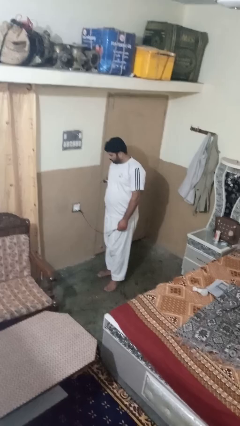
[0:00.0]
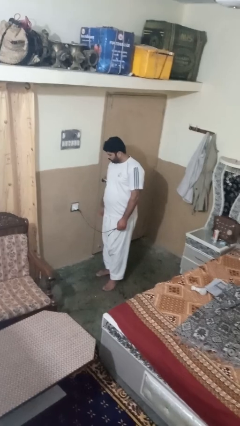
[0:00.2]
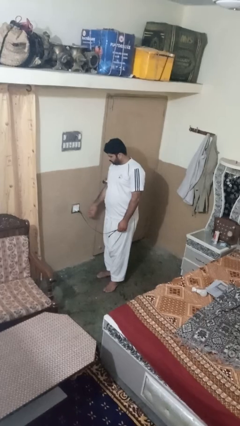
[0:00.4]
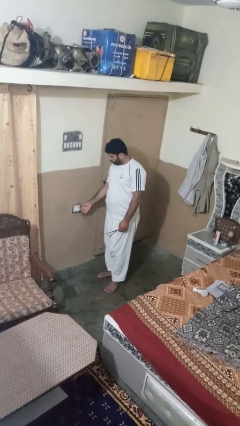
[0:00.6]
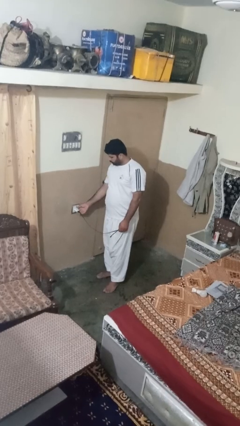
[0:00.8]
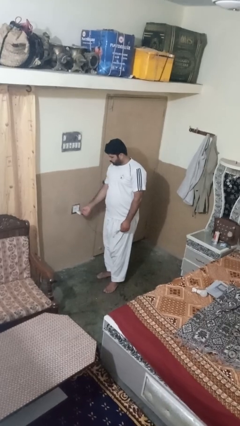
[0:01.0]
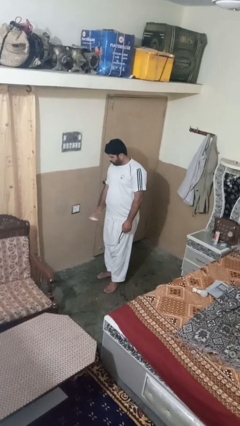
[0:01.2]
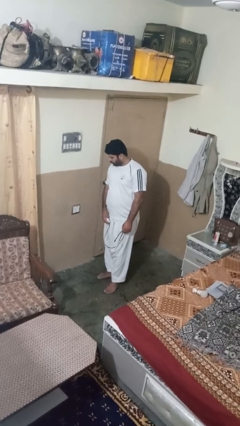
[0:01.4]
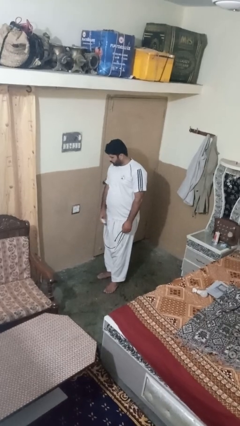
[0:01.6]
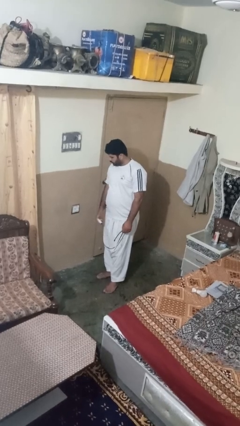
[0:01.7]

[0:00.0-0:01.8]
person unplugs from electrical socket

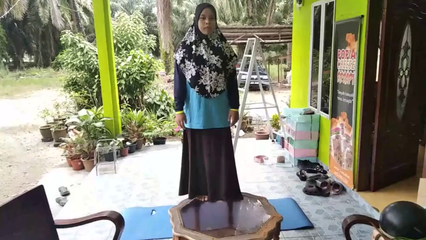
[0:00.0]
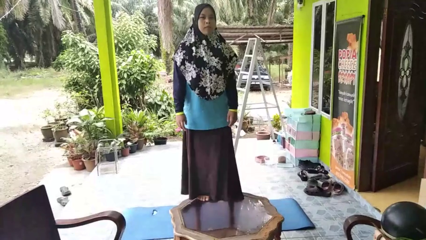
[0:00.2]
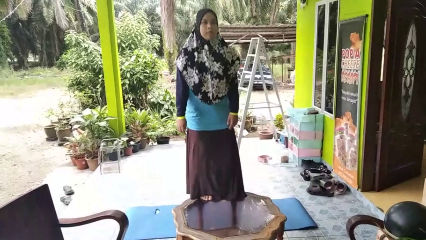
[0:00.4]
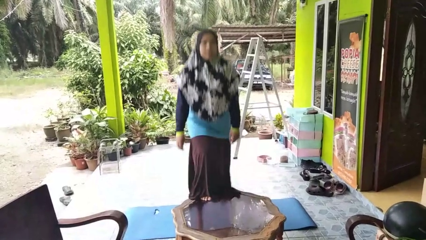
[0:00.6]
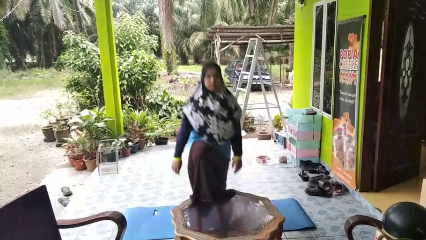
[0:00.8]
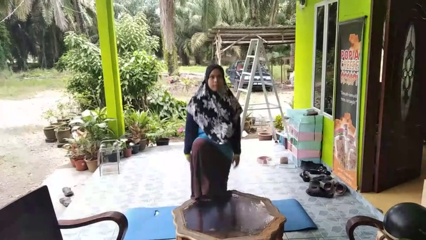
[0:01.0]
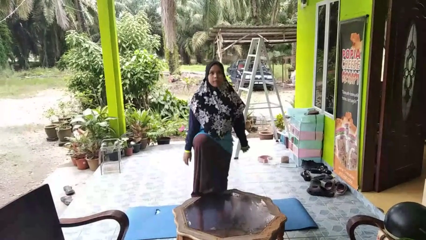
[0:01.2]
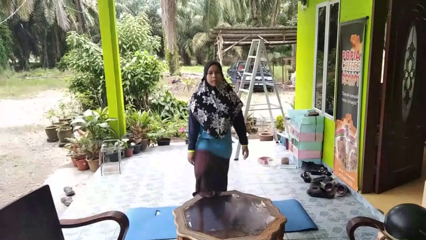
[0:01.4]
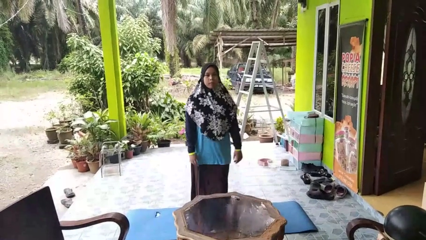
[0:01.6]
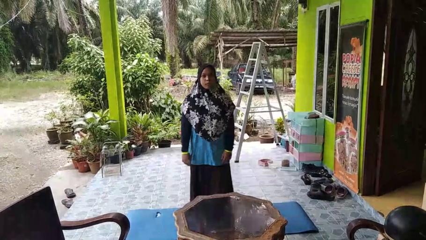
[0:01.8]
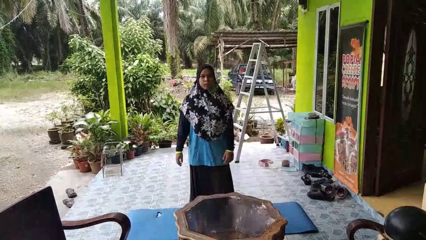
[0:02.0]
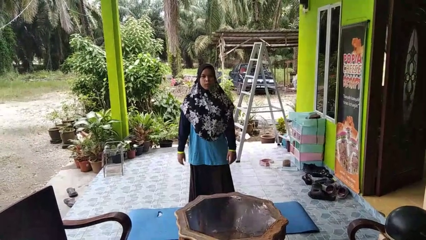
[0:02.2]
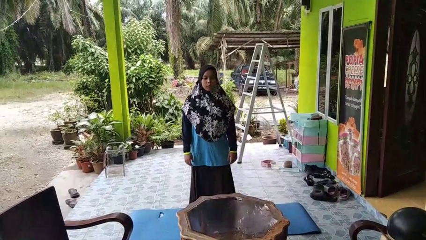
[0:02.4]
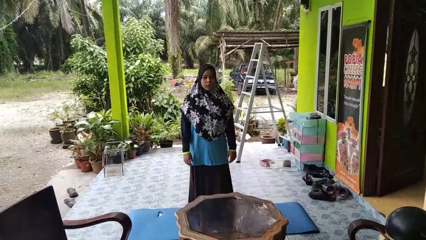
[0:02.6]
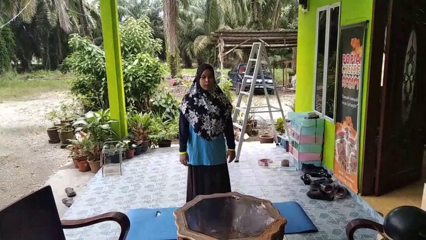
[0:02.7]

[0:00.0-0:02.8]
person climbs off table

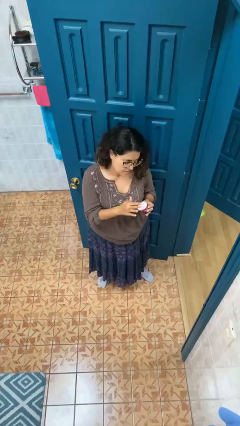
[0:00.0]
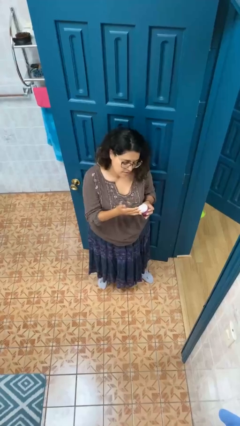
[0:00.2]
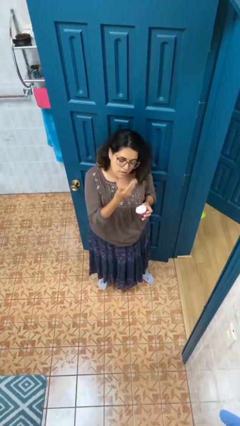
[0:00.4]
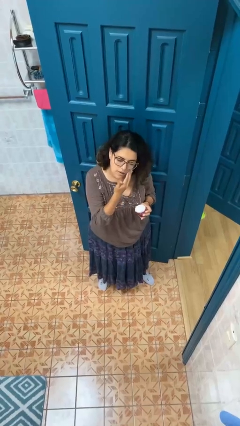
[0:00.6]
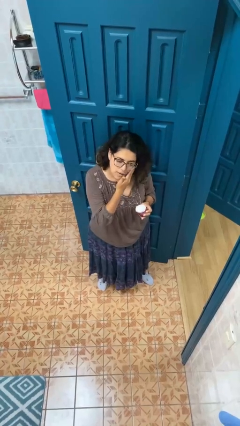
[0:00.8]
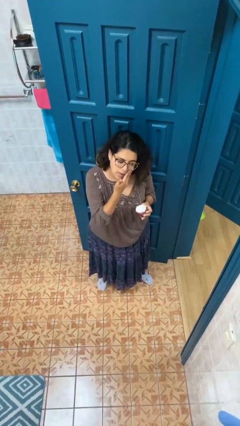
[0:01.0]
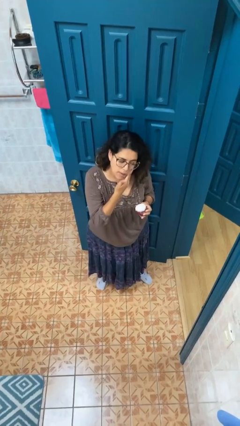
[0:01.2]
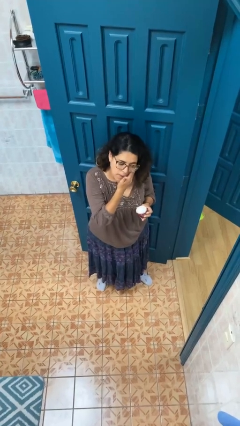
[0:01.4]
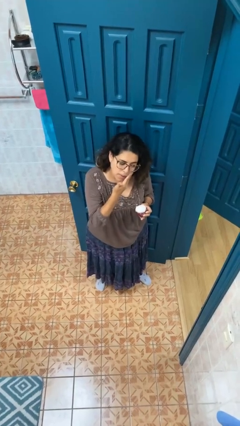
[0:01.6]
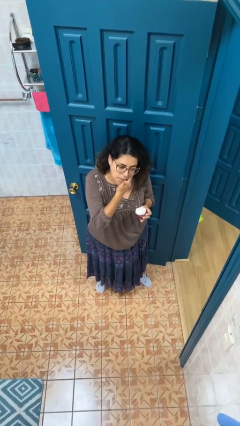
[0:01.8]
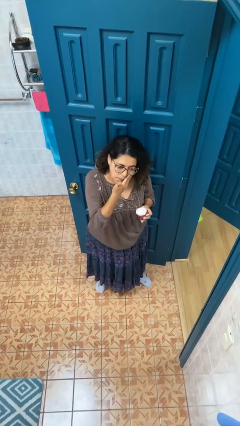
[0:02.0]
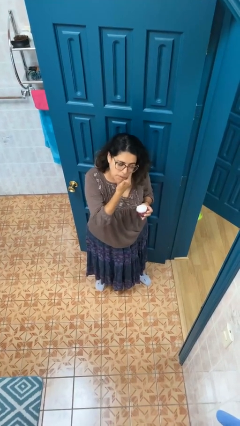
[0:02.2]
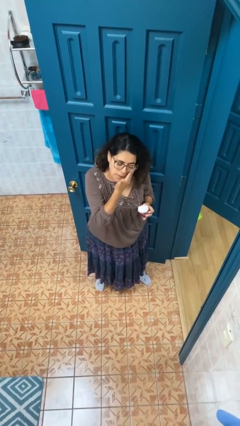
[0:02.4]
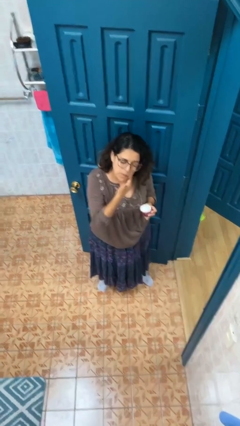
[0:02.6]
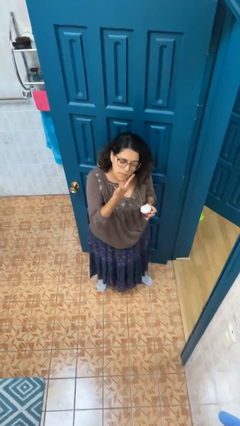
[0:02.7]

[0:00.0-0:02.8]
person applies facial moisturizer

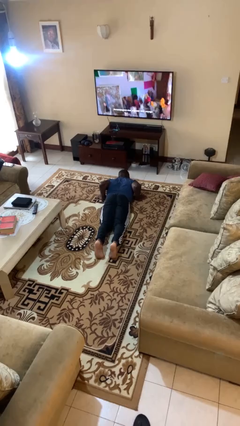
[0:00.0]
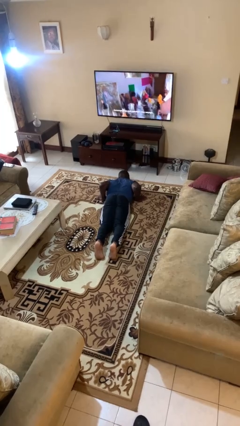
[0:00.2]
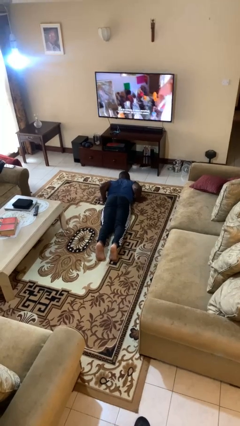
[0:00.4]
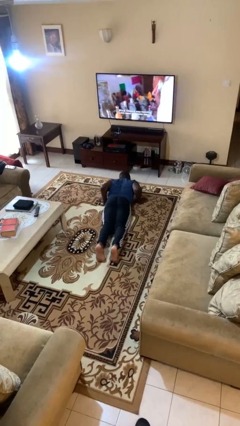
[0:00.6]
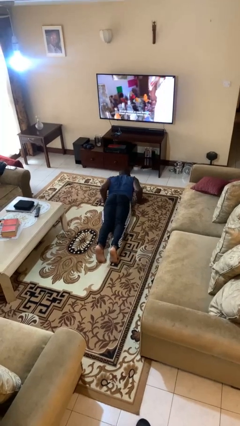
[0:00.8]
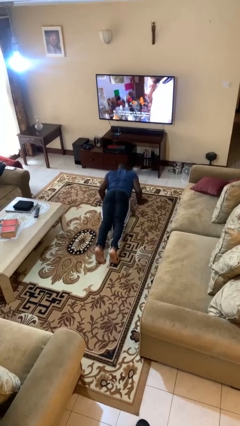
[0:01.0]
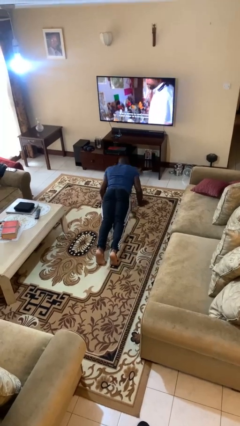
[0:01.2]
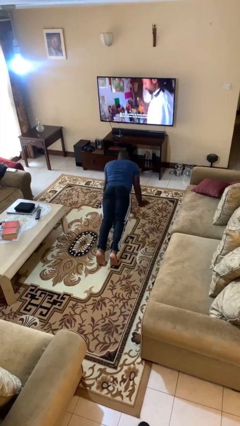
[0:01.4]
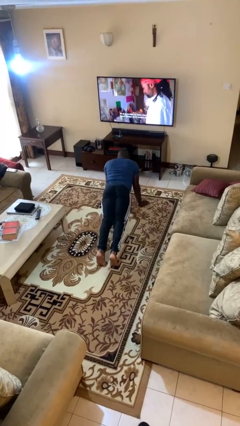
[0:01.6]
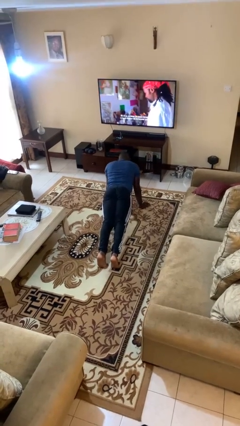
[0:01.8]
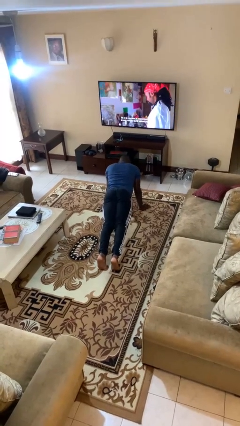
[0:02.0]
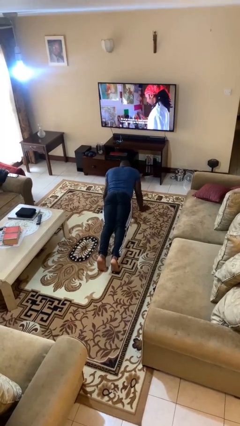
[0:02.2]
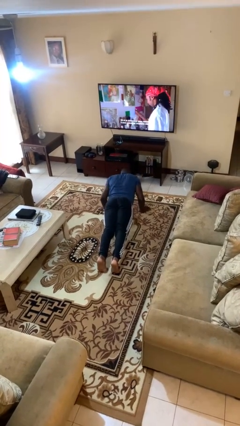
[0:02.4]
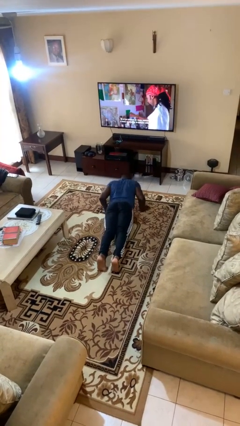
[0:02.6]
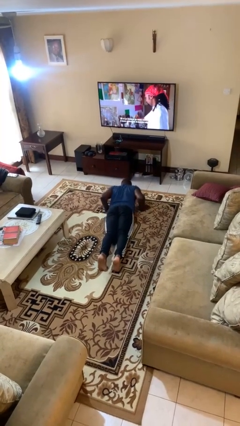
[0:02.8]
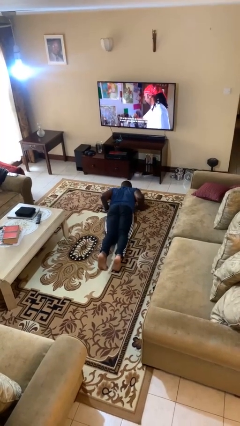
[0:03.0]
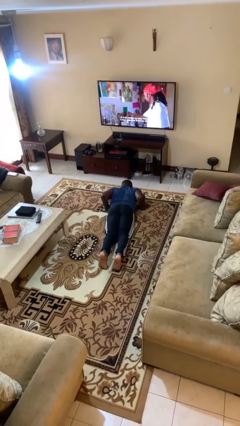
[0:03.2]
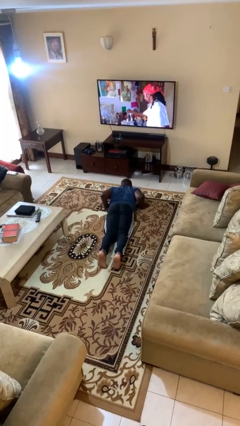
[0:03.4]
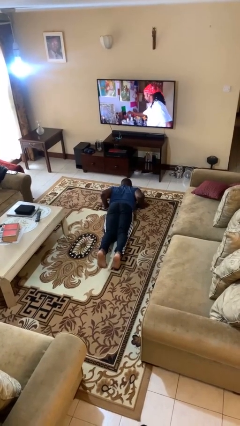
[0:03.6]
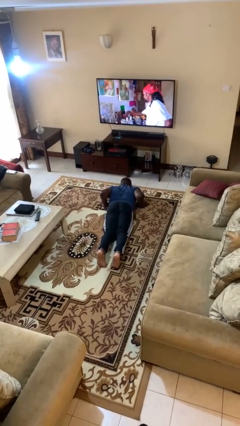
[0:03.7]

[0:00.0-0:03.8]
person exercises with pushup

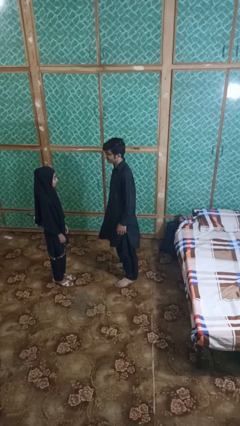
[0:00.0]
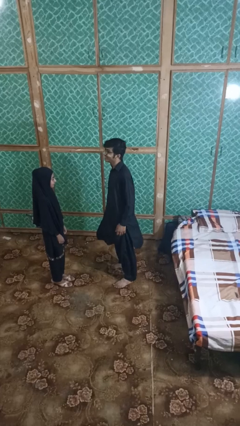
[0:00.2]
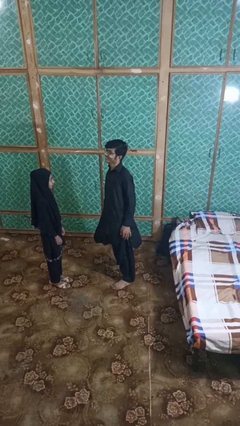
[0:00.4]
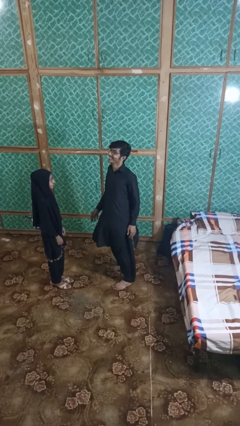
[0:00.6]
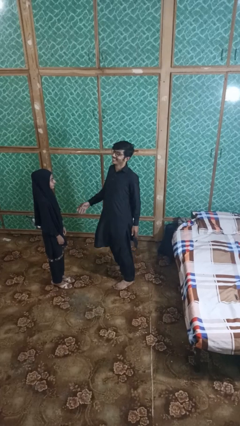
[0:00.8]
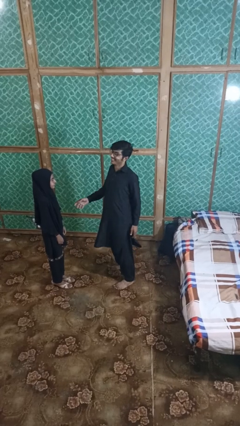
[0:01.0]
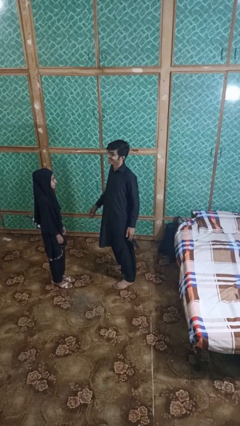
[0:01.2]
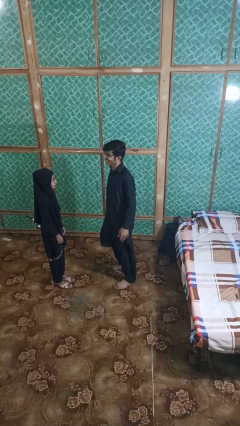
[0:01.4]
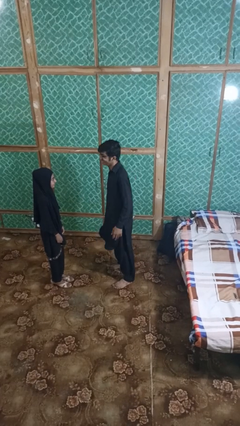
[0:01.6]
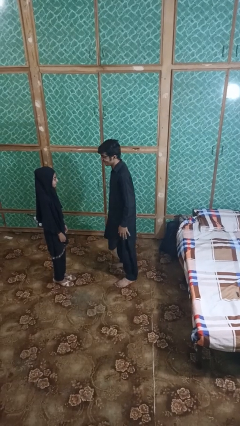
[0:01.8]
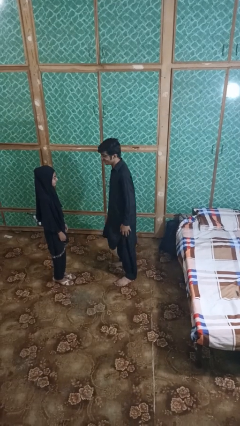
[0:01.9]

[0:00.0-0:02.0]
person laughs with person

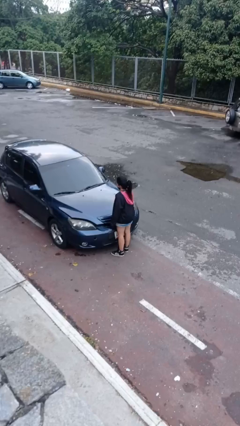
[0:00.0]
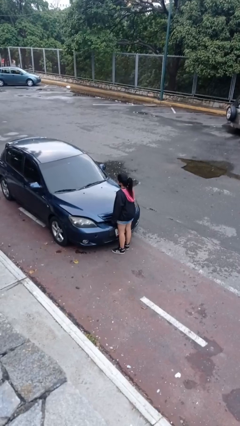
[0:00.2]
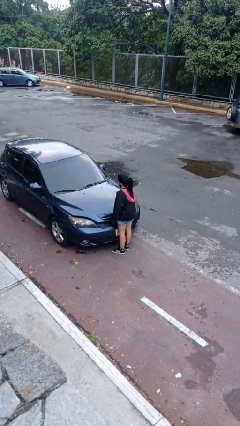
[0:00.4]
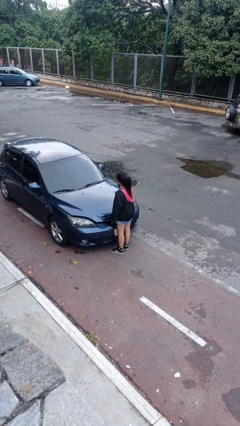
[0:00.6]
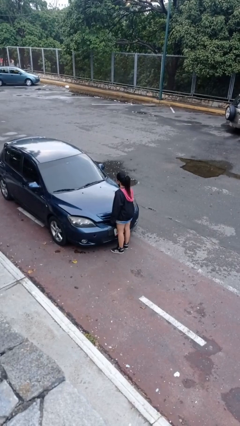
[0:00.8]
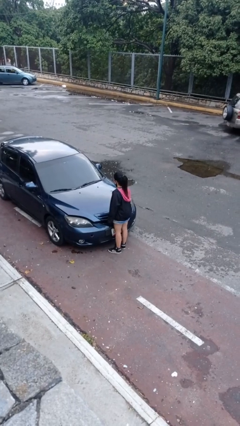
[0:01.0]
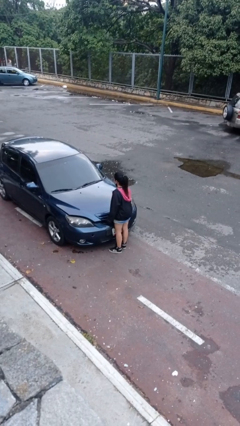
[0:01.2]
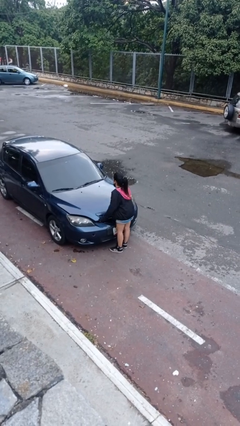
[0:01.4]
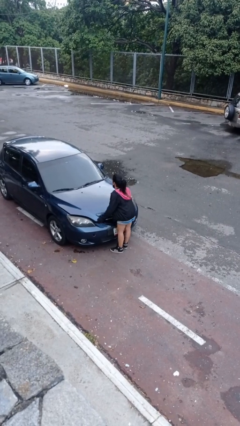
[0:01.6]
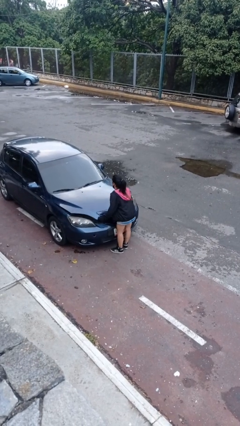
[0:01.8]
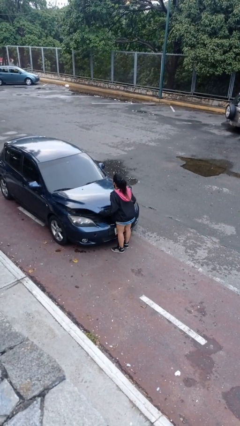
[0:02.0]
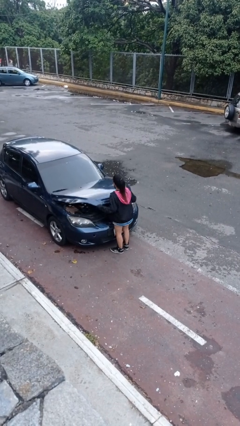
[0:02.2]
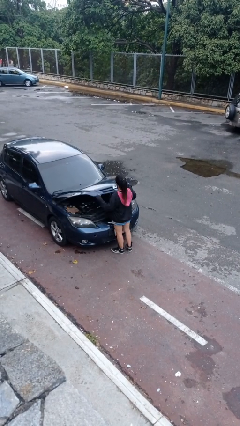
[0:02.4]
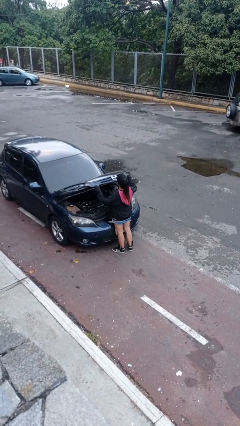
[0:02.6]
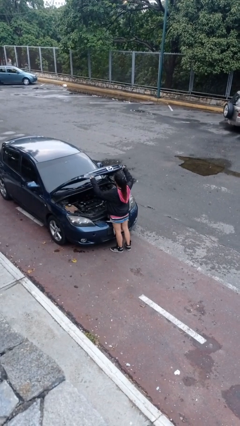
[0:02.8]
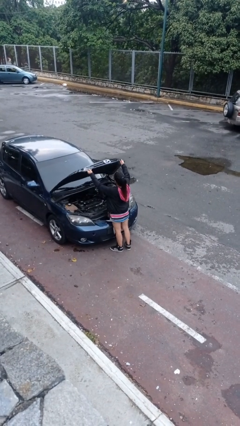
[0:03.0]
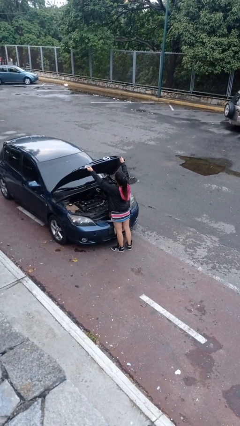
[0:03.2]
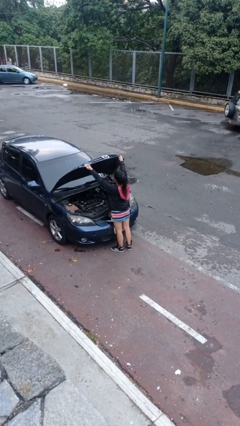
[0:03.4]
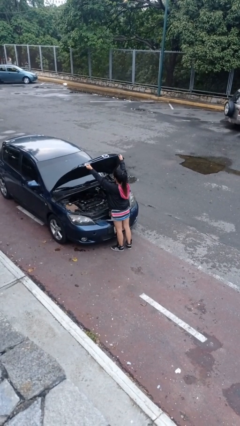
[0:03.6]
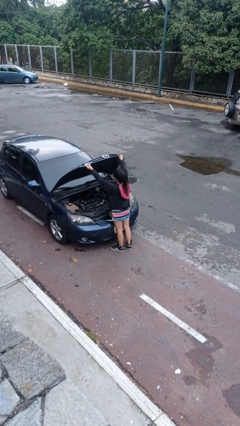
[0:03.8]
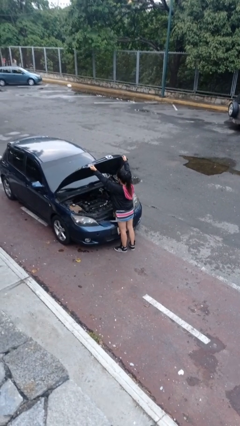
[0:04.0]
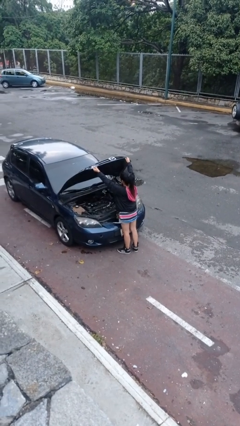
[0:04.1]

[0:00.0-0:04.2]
person opens car hood
